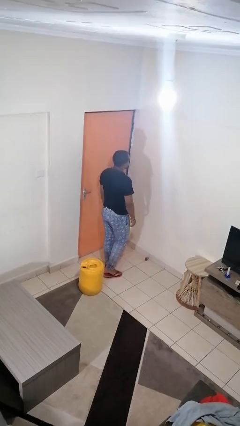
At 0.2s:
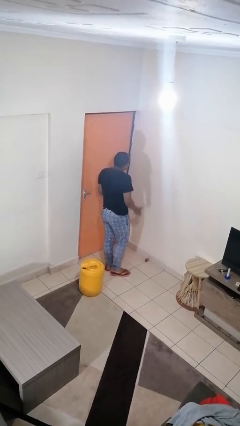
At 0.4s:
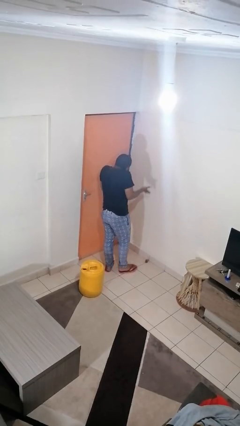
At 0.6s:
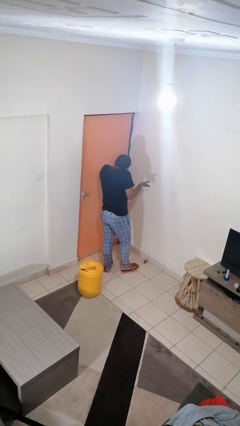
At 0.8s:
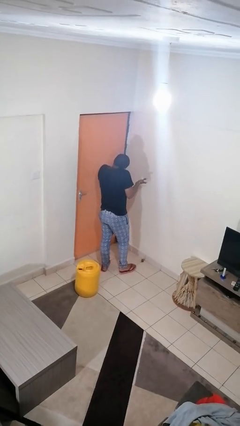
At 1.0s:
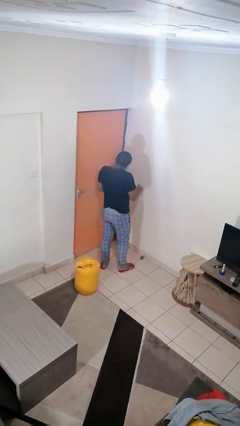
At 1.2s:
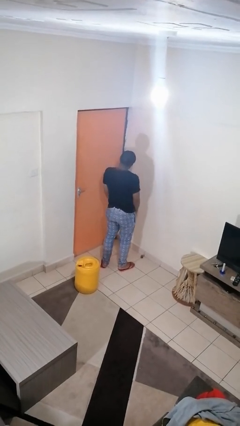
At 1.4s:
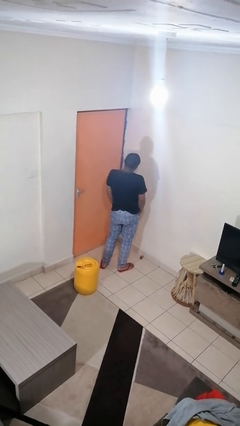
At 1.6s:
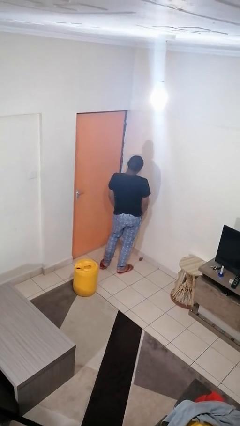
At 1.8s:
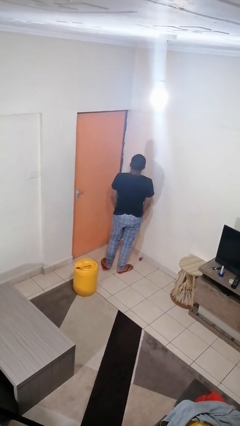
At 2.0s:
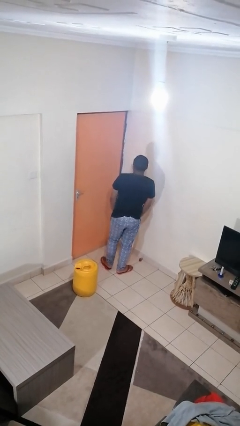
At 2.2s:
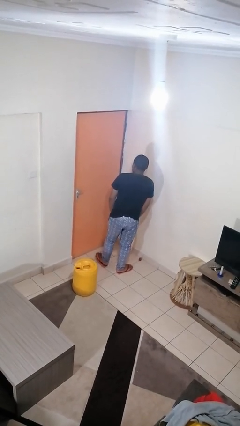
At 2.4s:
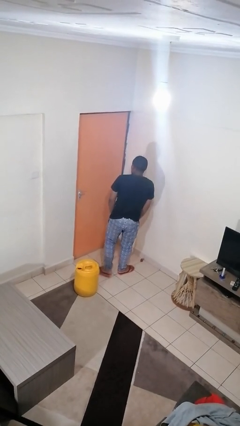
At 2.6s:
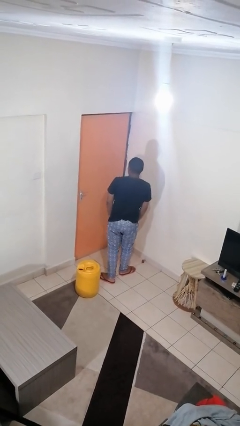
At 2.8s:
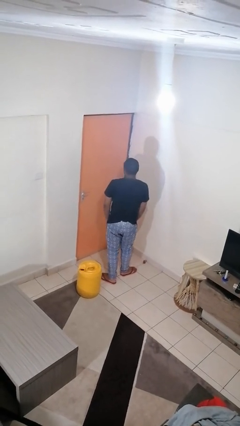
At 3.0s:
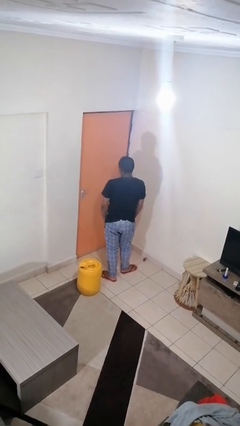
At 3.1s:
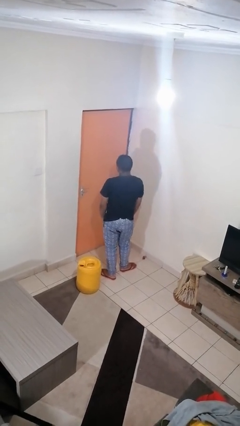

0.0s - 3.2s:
person shrugs

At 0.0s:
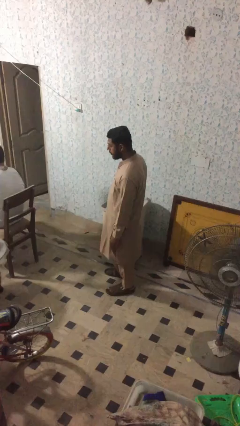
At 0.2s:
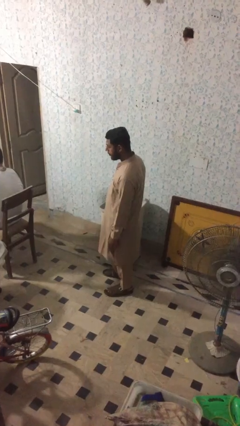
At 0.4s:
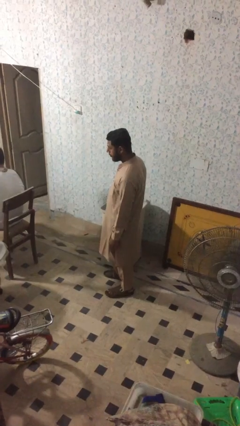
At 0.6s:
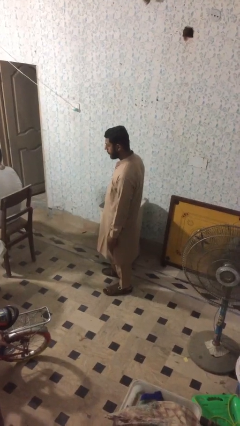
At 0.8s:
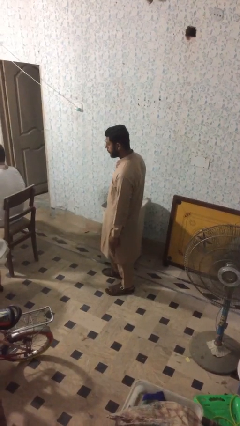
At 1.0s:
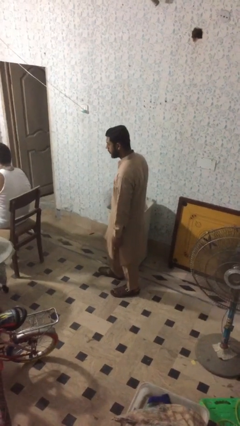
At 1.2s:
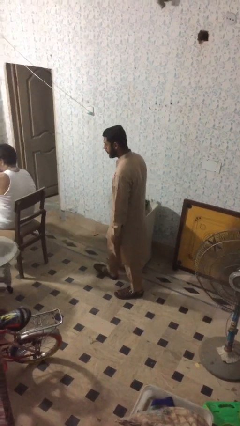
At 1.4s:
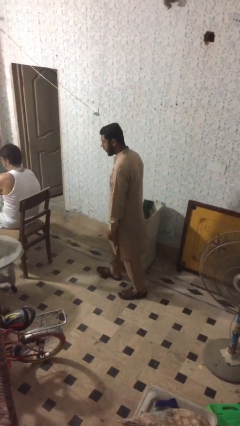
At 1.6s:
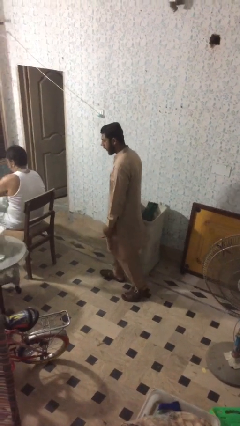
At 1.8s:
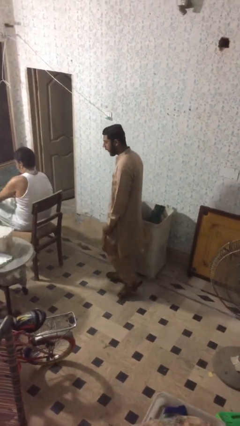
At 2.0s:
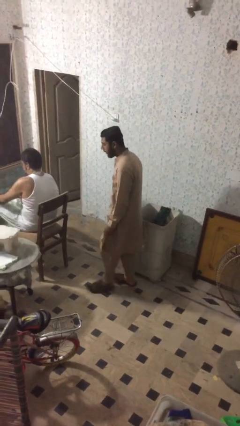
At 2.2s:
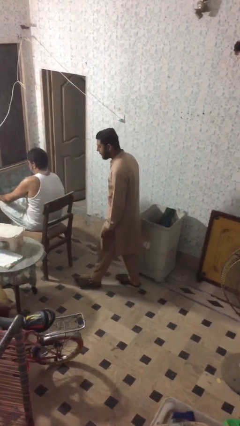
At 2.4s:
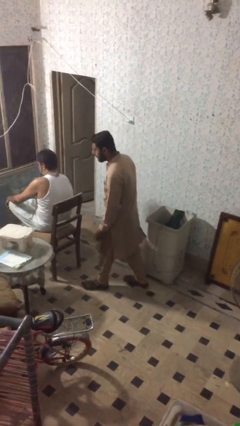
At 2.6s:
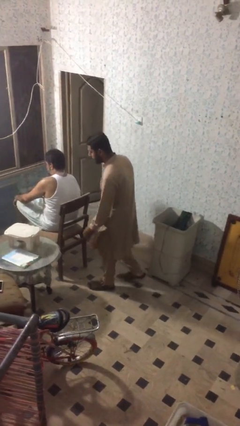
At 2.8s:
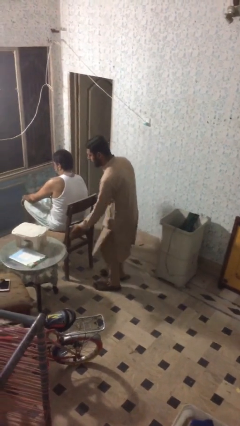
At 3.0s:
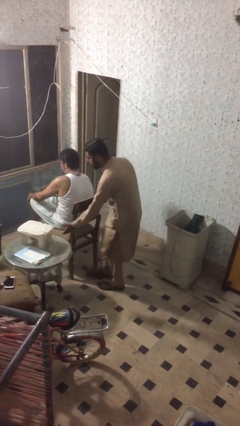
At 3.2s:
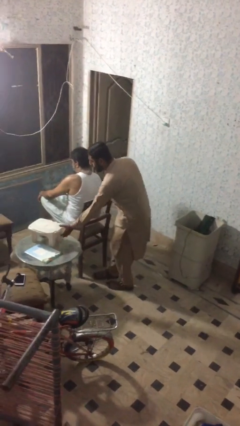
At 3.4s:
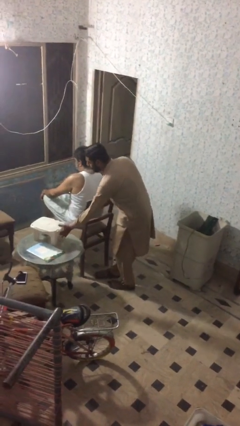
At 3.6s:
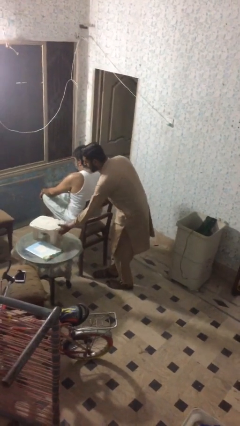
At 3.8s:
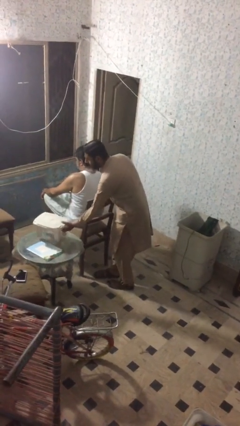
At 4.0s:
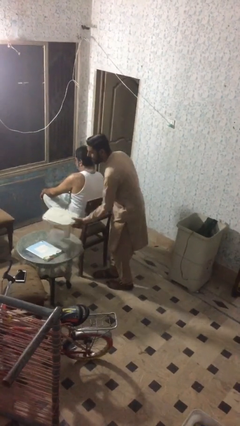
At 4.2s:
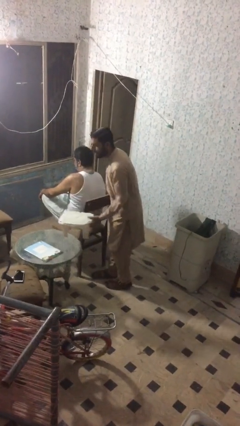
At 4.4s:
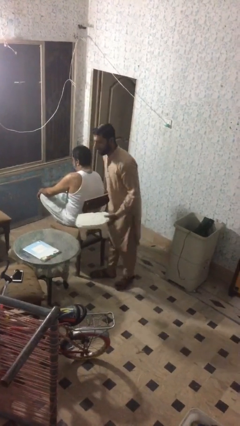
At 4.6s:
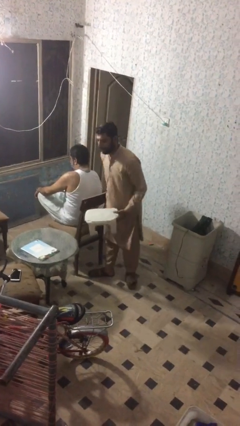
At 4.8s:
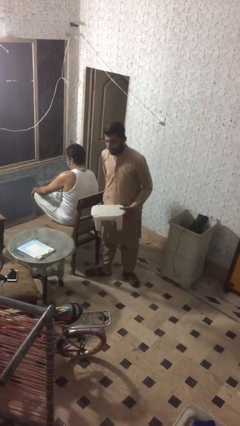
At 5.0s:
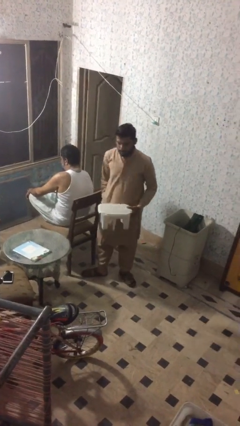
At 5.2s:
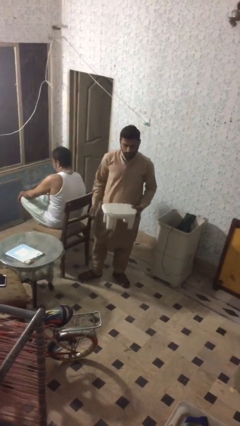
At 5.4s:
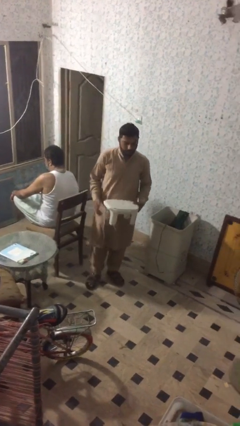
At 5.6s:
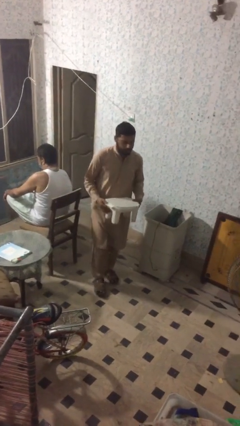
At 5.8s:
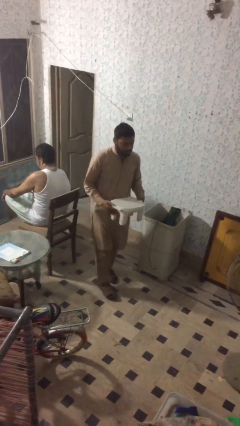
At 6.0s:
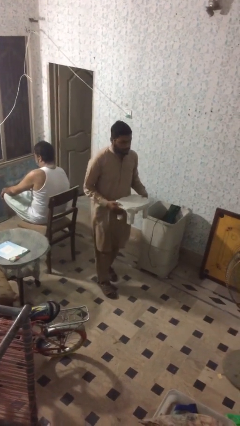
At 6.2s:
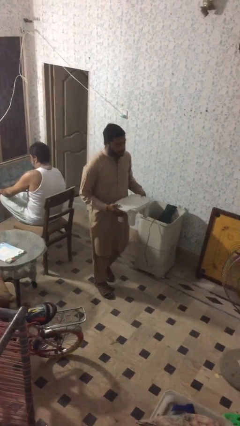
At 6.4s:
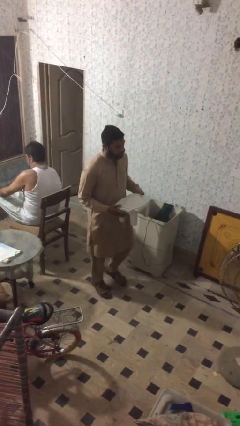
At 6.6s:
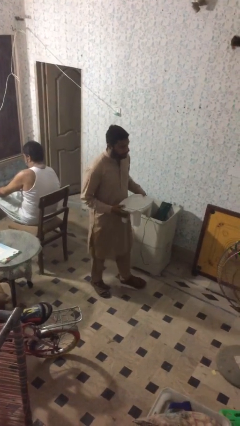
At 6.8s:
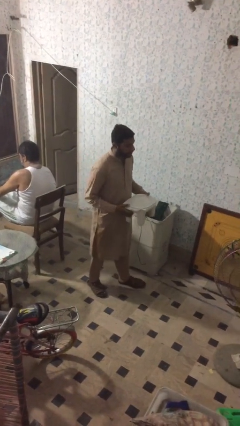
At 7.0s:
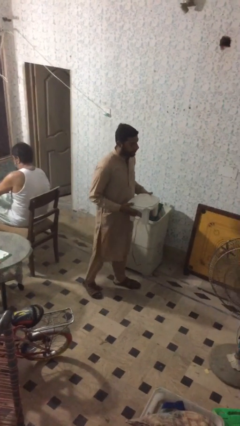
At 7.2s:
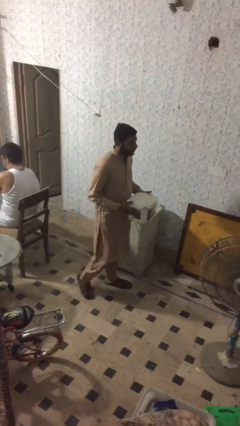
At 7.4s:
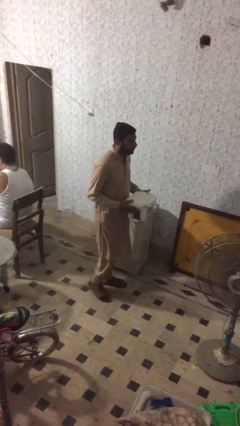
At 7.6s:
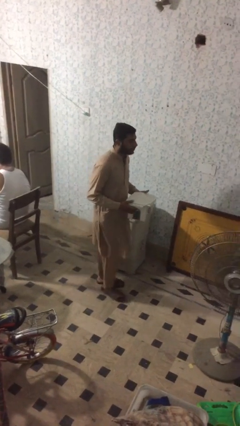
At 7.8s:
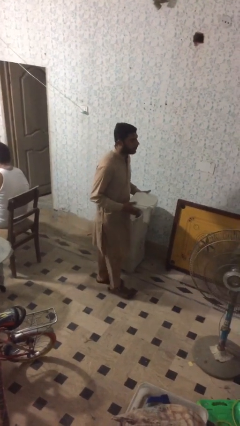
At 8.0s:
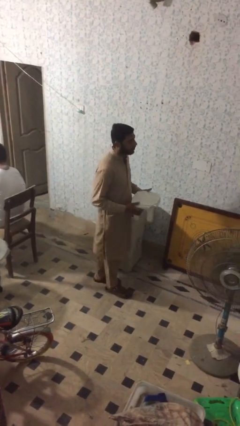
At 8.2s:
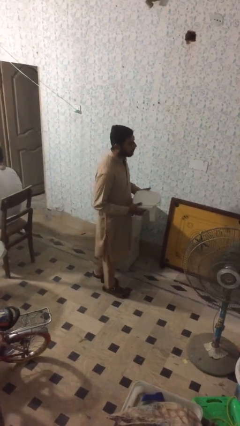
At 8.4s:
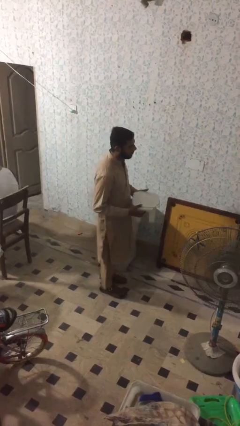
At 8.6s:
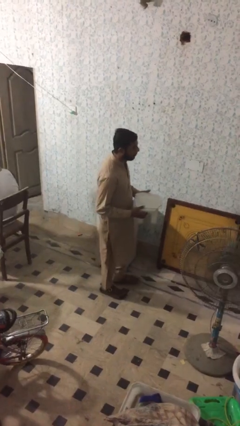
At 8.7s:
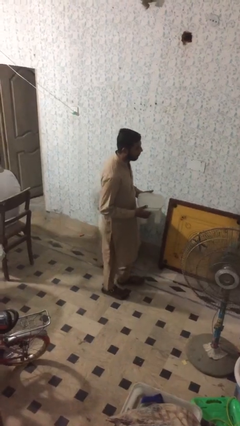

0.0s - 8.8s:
person steals object from person

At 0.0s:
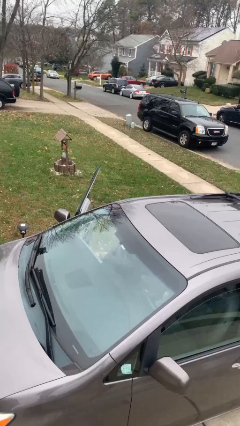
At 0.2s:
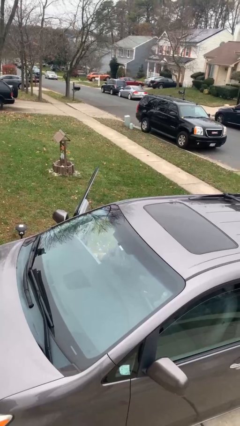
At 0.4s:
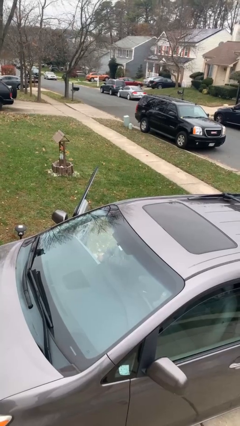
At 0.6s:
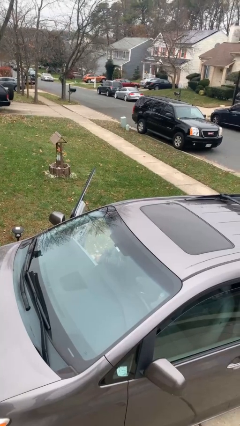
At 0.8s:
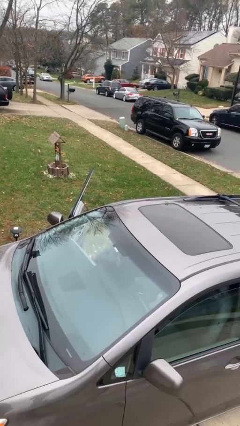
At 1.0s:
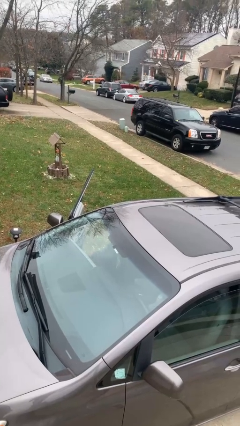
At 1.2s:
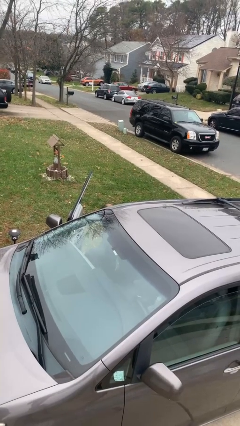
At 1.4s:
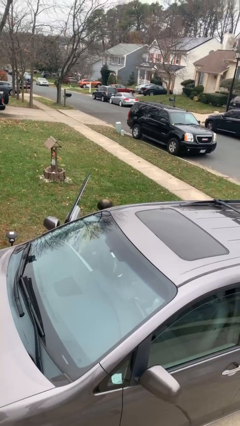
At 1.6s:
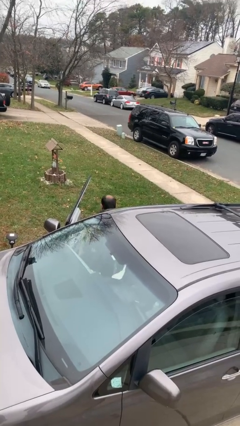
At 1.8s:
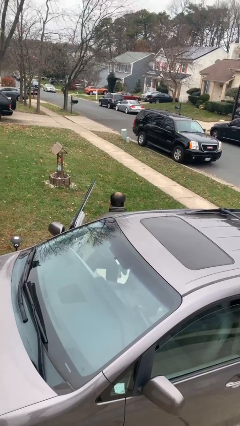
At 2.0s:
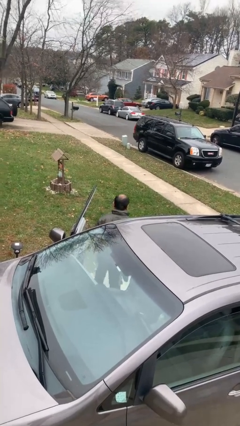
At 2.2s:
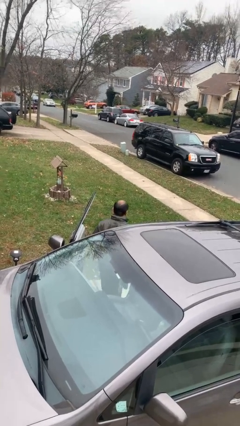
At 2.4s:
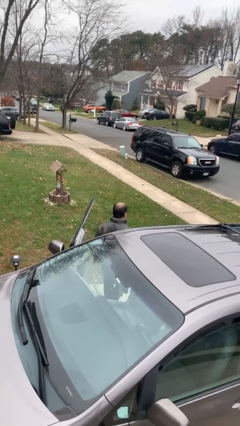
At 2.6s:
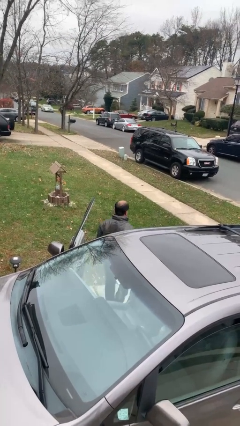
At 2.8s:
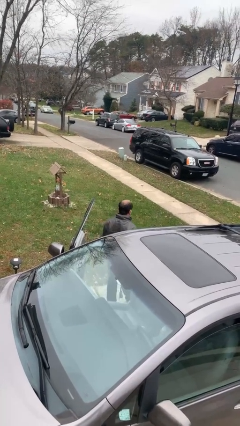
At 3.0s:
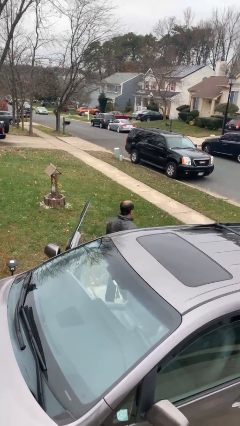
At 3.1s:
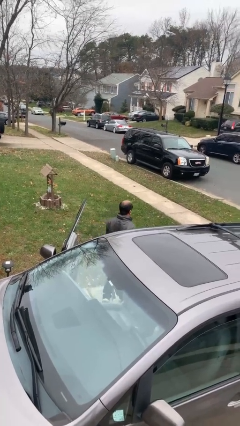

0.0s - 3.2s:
person exits car

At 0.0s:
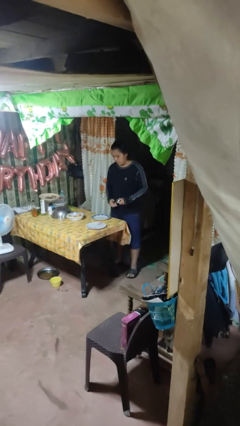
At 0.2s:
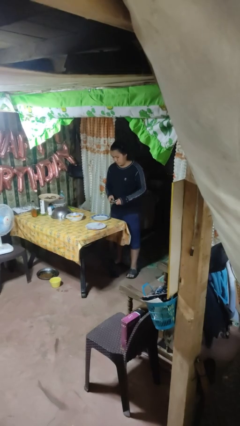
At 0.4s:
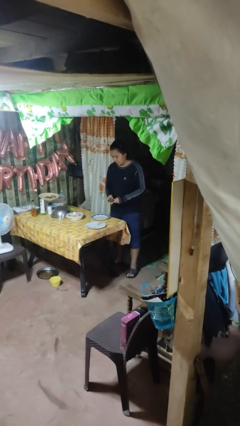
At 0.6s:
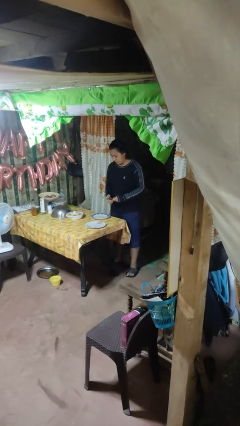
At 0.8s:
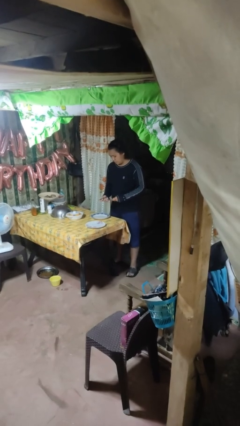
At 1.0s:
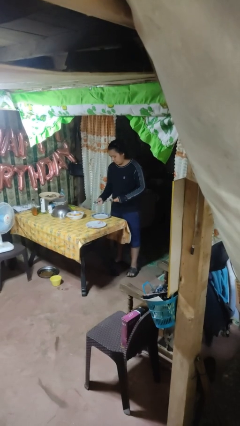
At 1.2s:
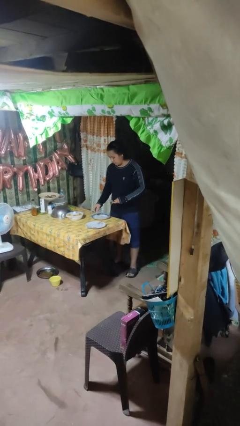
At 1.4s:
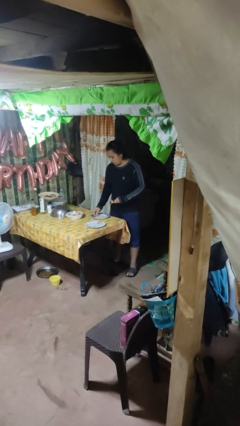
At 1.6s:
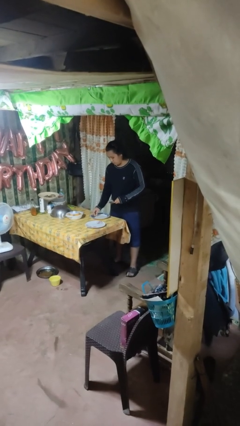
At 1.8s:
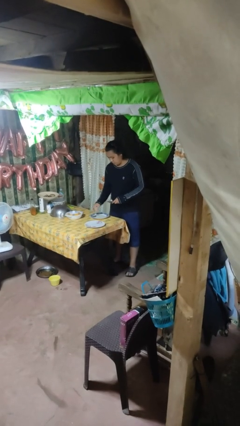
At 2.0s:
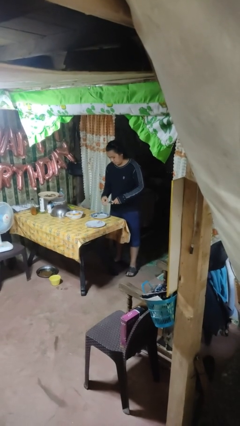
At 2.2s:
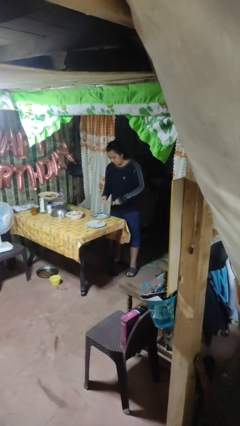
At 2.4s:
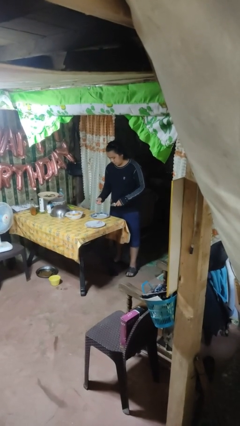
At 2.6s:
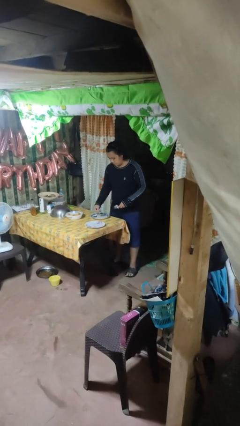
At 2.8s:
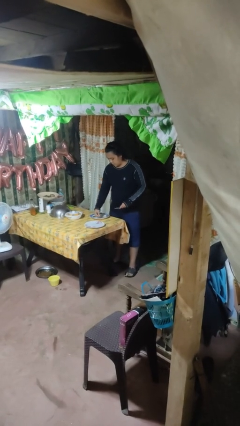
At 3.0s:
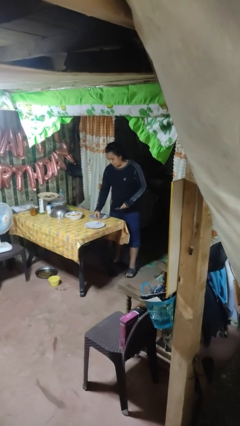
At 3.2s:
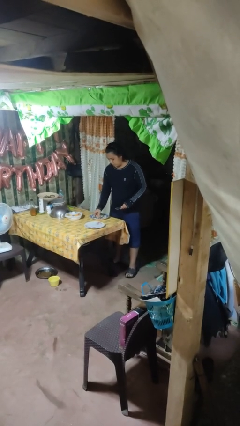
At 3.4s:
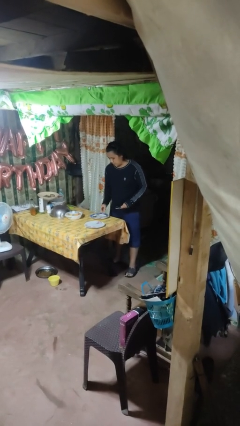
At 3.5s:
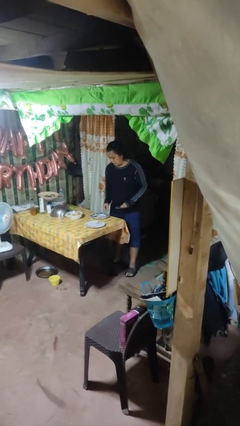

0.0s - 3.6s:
person sets table
